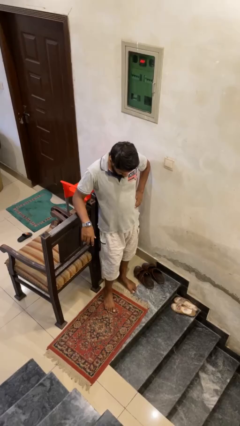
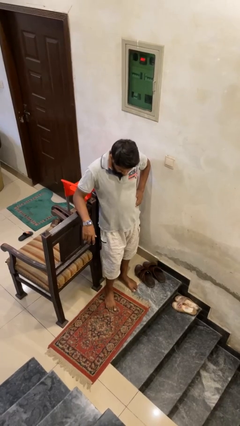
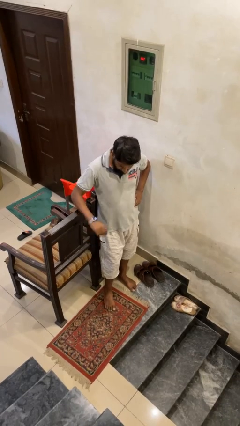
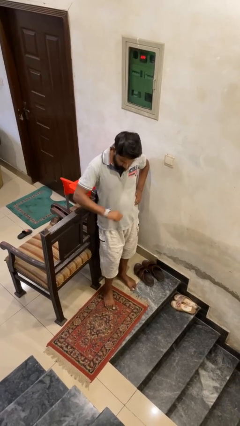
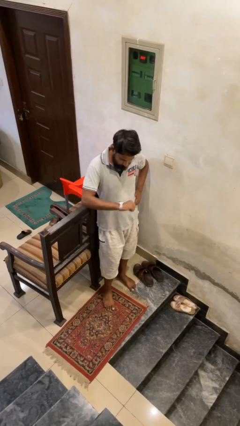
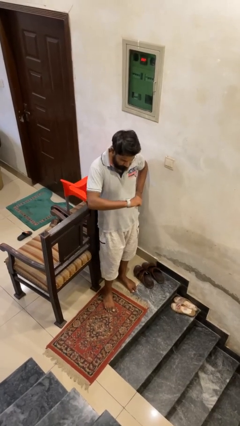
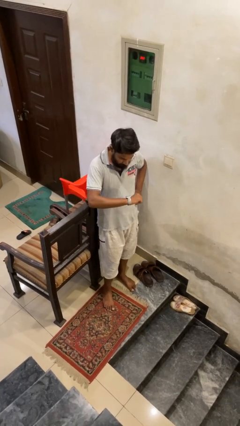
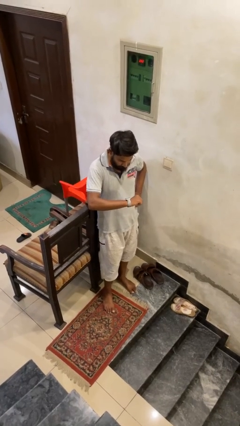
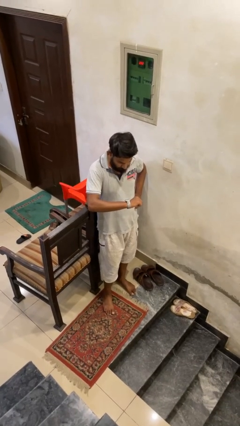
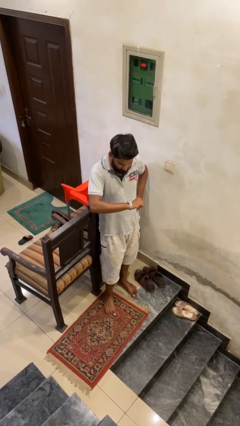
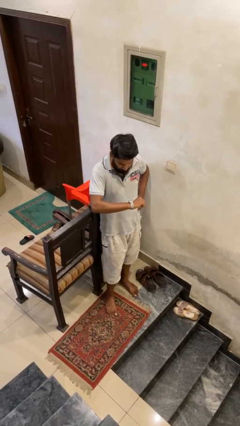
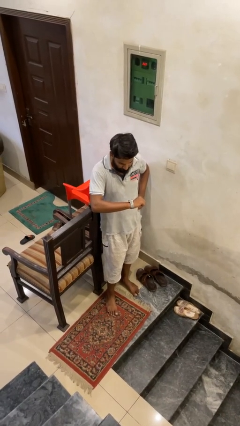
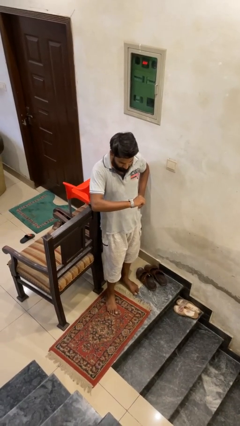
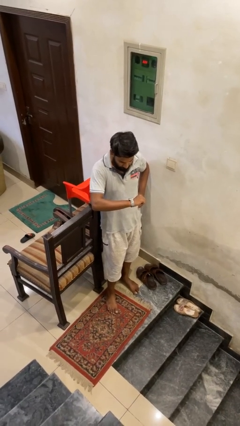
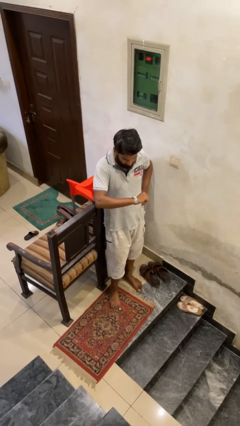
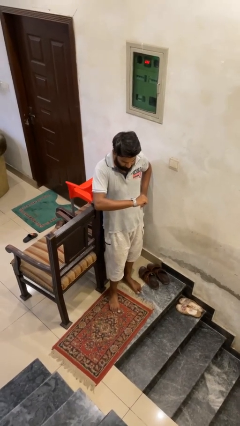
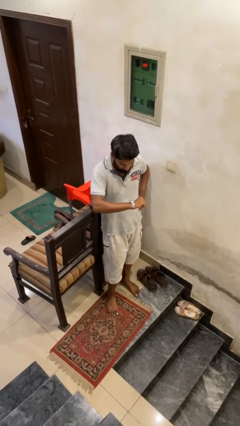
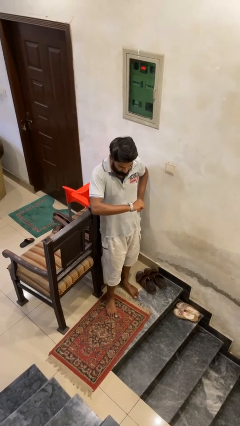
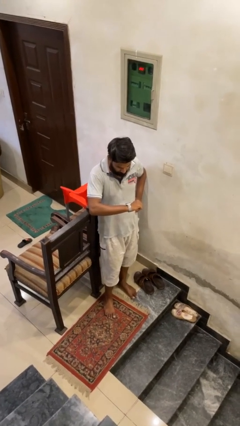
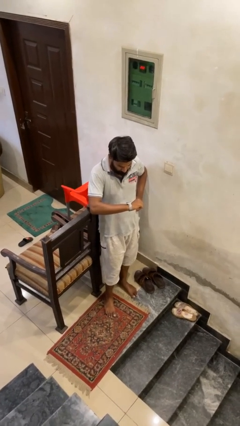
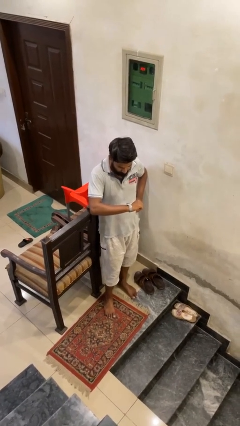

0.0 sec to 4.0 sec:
person looks at wristwatch

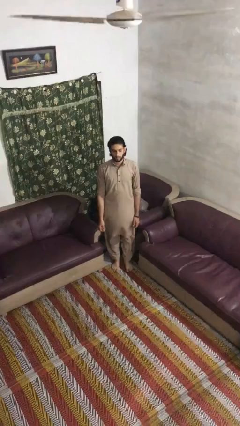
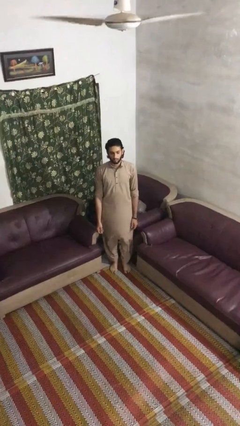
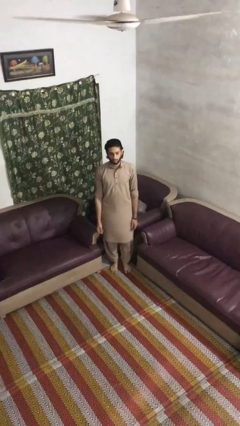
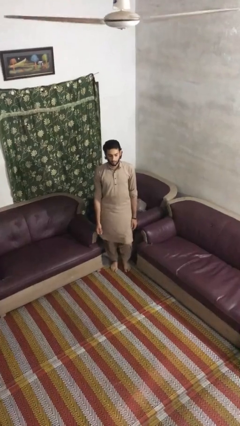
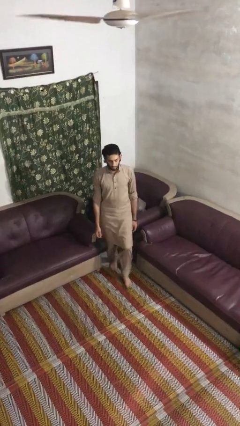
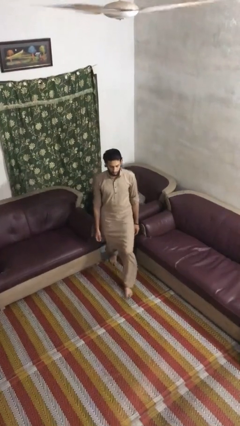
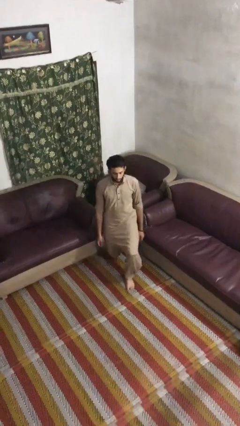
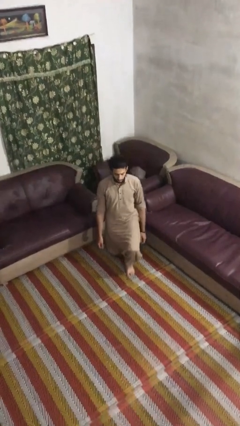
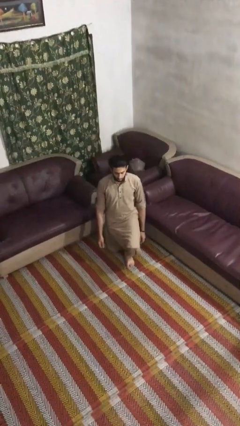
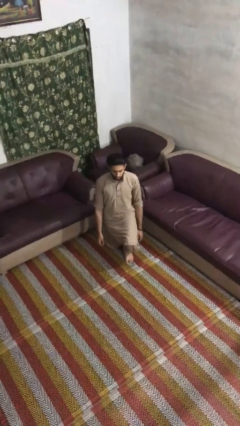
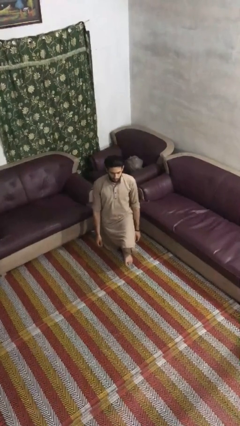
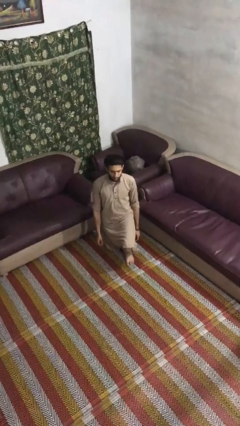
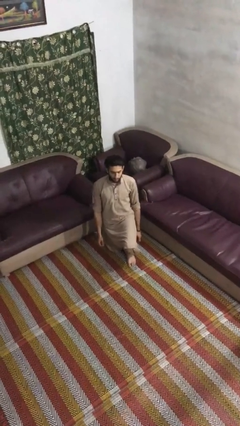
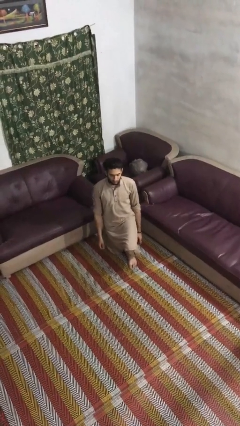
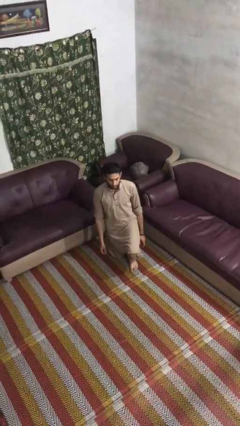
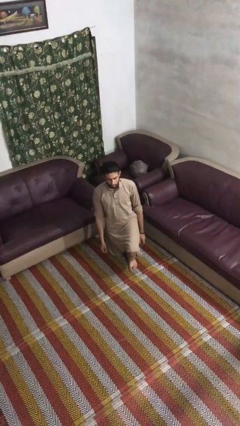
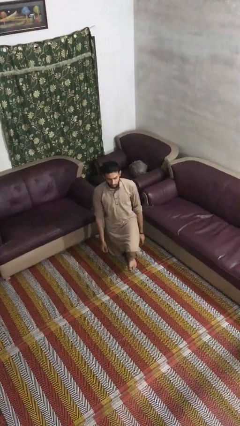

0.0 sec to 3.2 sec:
person kneels

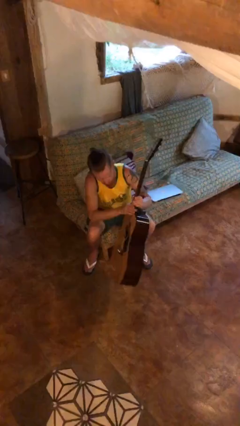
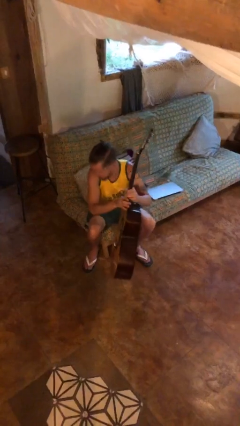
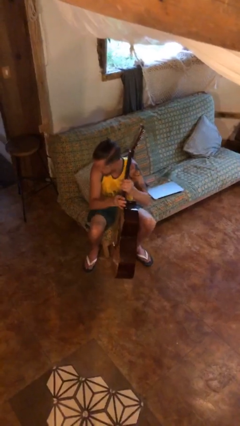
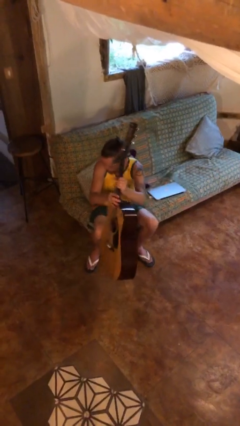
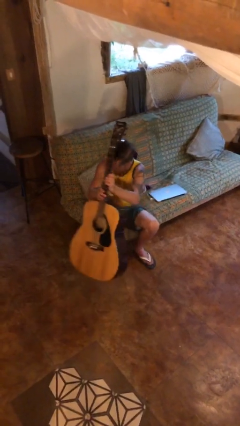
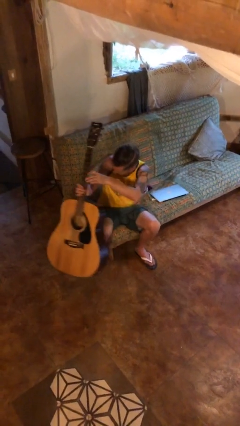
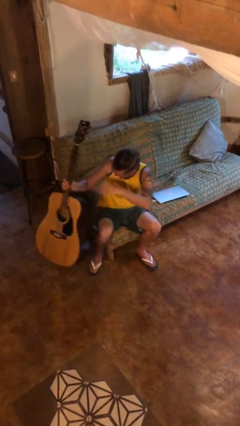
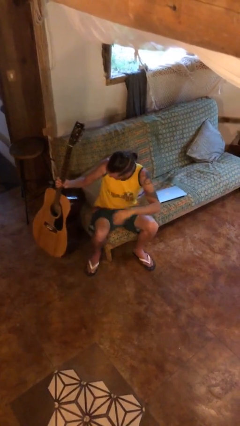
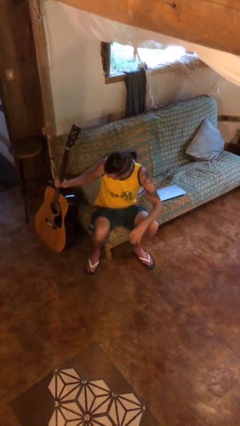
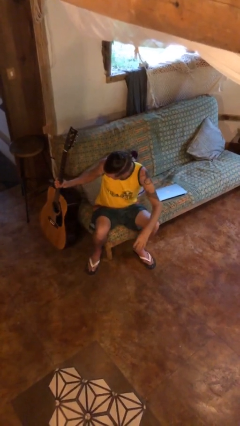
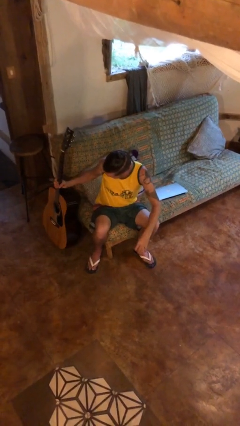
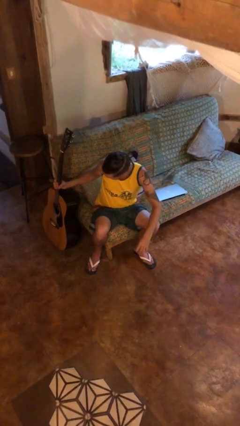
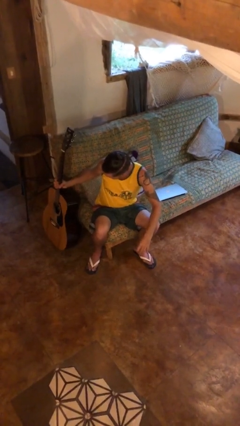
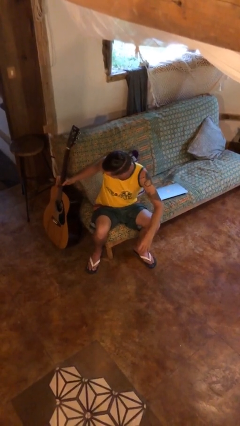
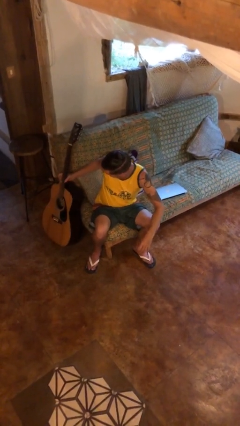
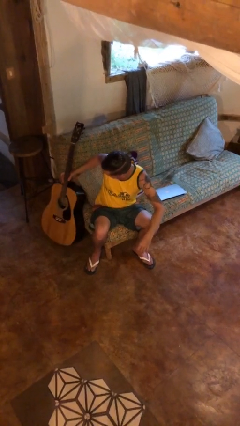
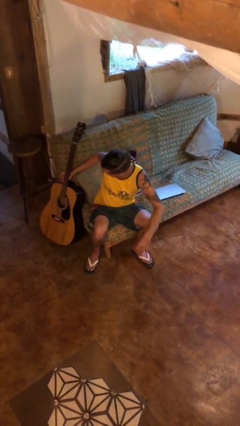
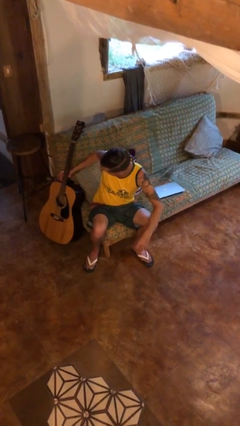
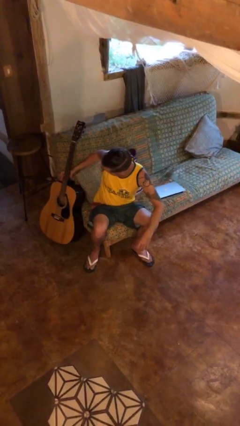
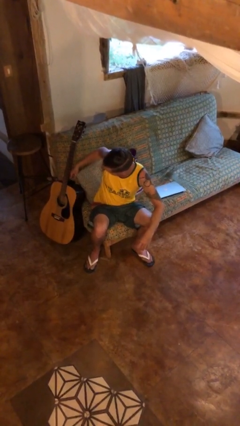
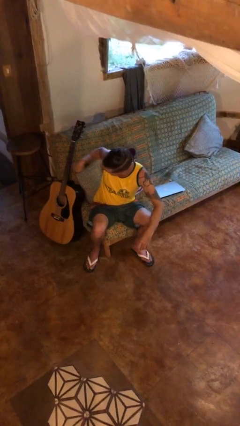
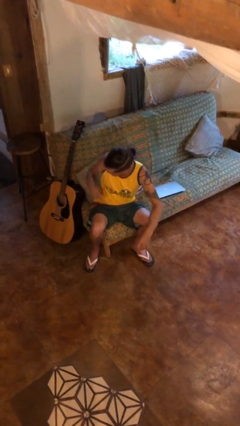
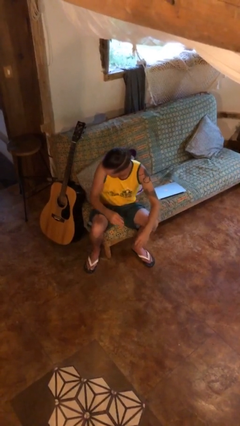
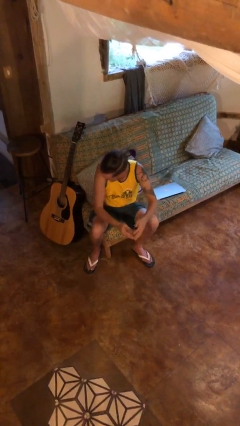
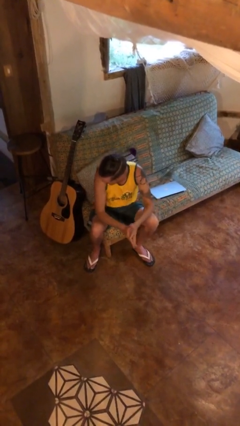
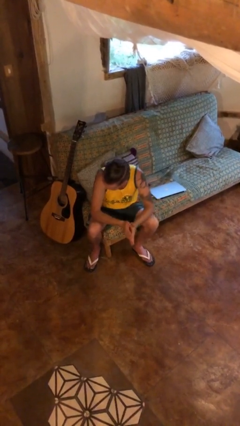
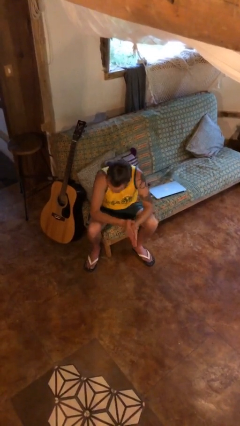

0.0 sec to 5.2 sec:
person puts down object on floor

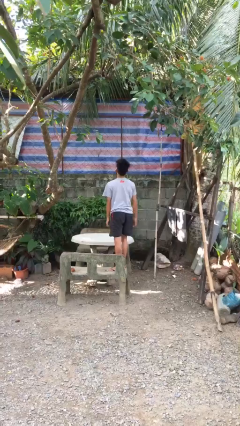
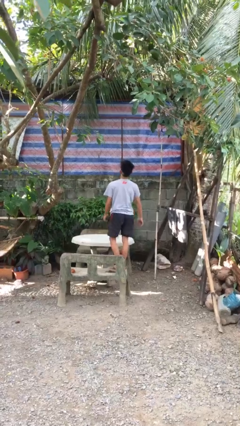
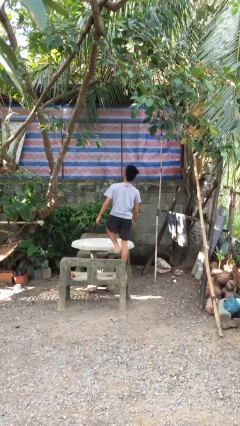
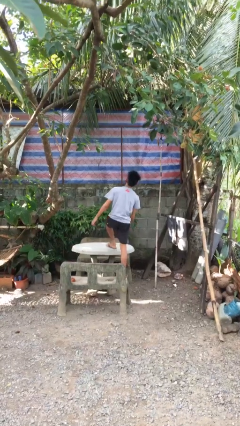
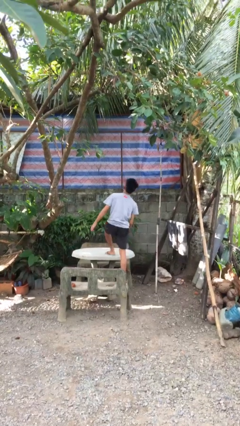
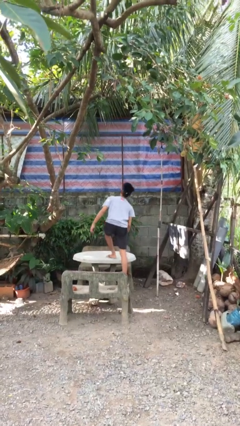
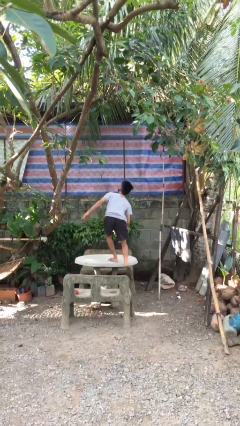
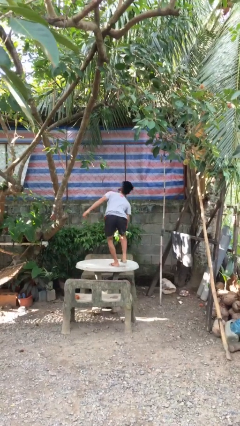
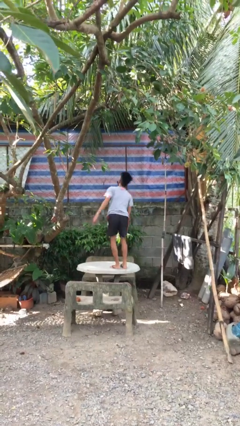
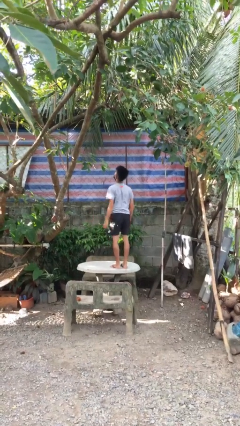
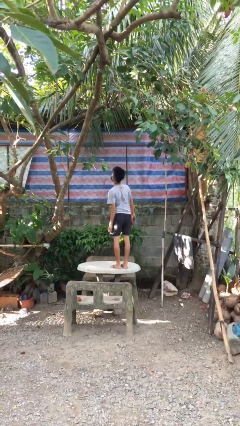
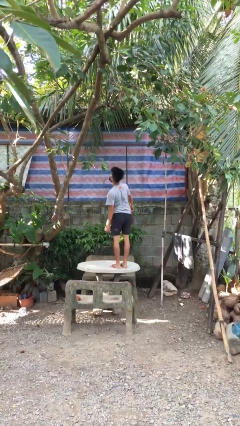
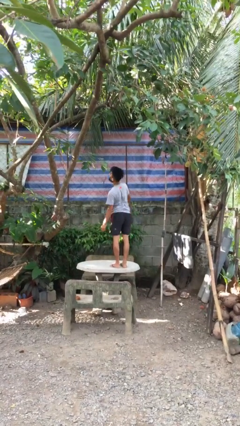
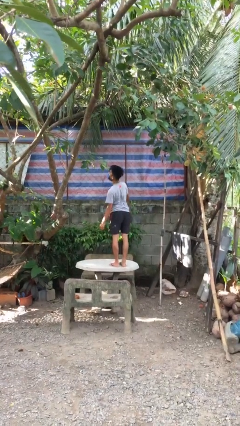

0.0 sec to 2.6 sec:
person climbs on table

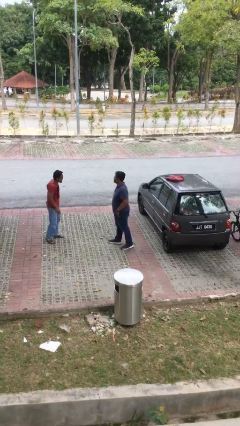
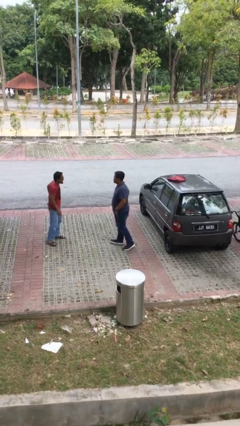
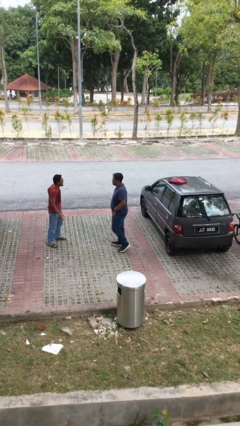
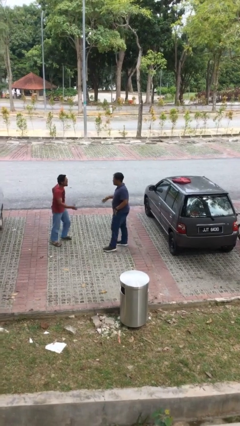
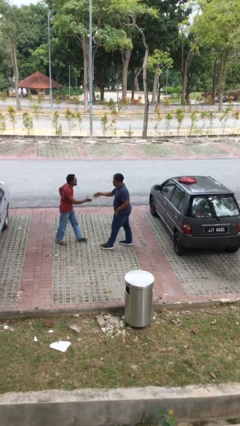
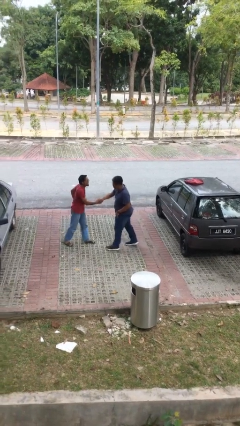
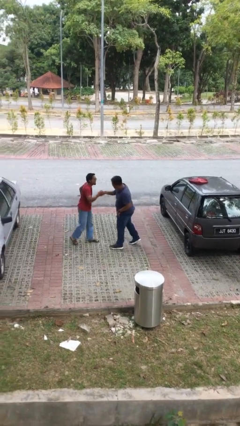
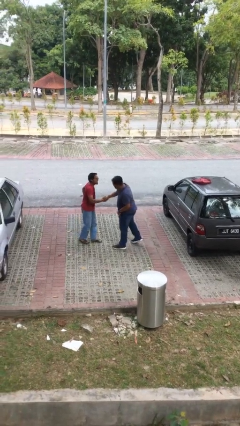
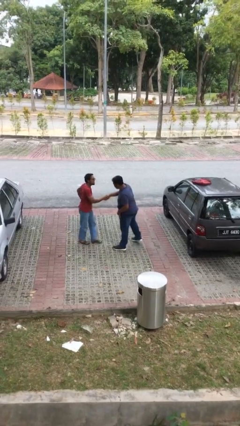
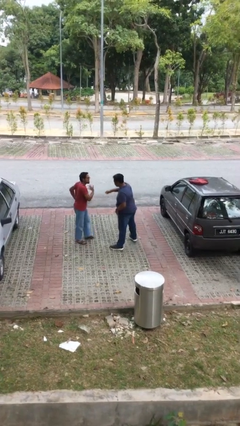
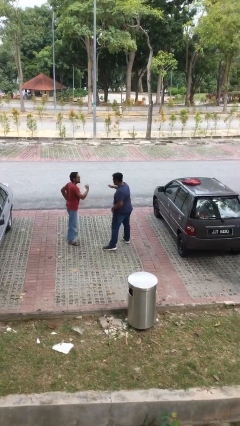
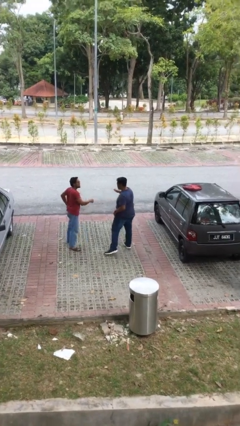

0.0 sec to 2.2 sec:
person shakes hand
